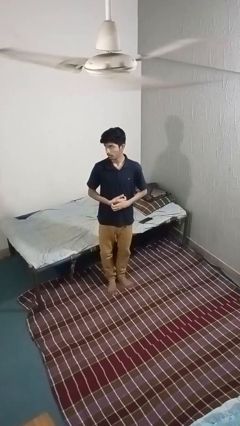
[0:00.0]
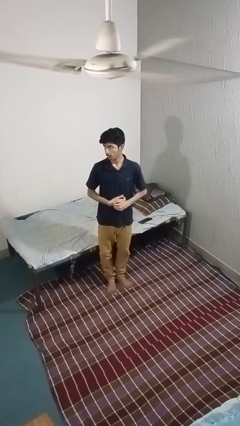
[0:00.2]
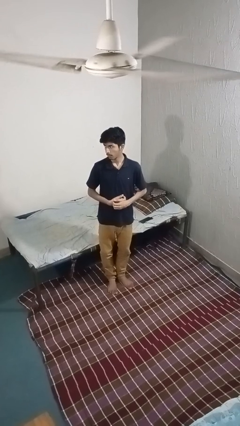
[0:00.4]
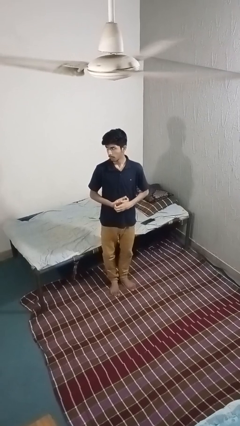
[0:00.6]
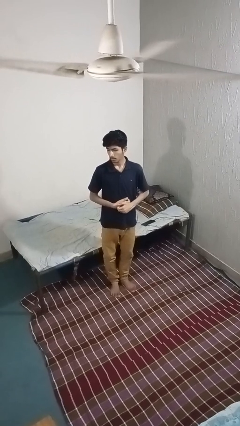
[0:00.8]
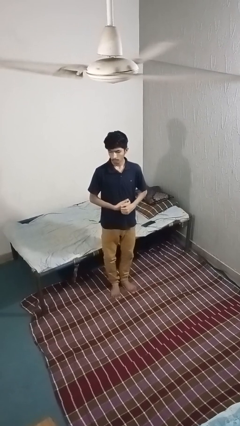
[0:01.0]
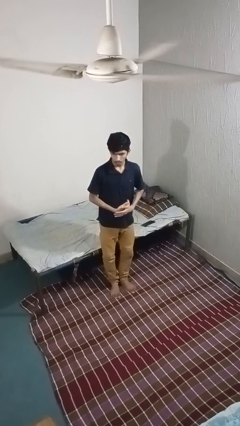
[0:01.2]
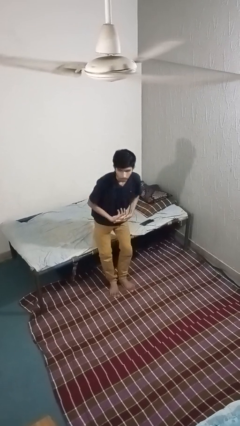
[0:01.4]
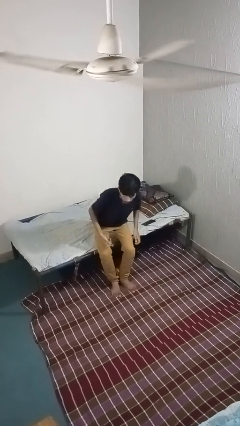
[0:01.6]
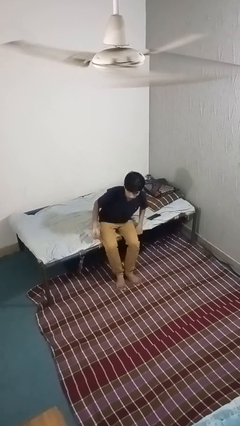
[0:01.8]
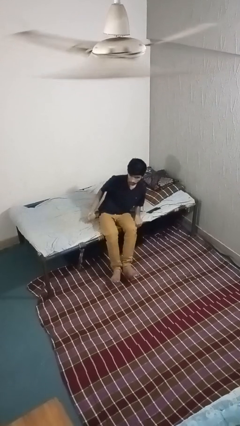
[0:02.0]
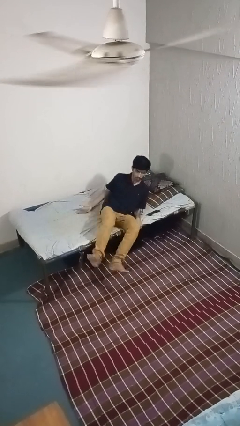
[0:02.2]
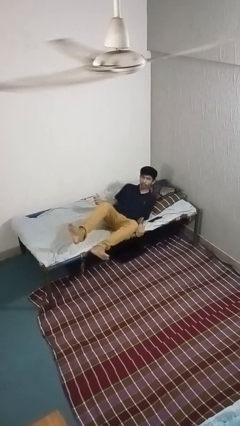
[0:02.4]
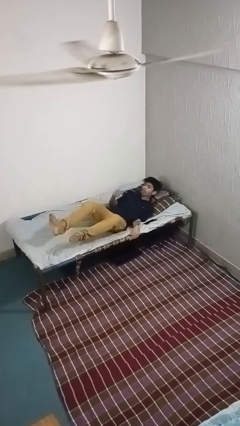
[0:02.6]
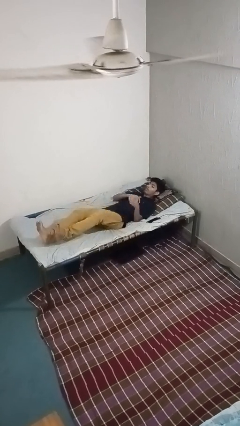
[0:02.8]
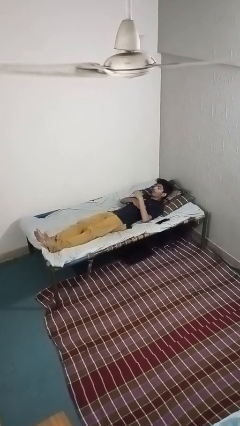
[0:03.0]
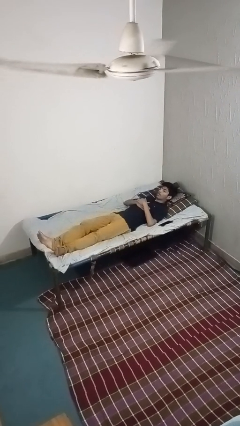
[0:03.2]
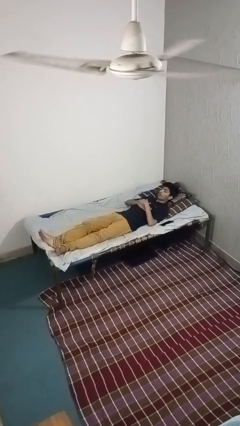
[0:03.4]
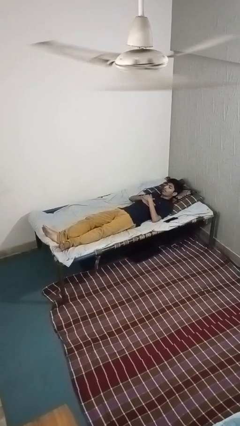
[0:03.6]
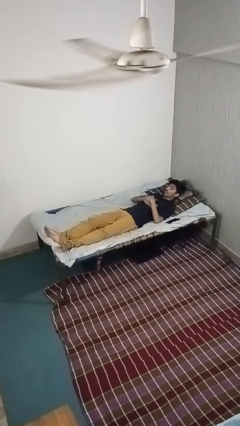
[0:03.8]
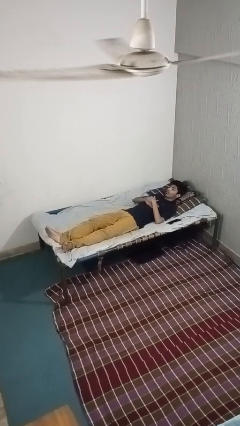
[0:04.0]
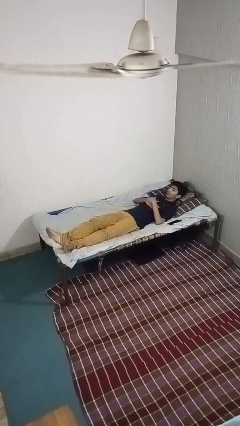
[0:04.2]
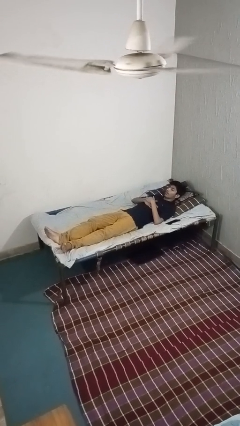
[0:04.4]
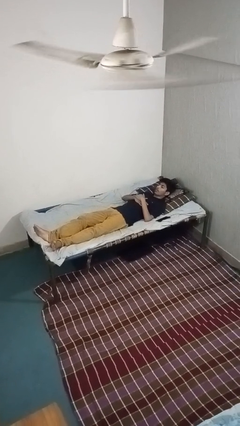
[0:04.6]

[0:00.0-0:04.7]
person lies down on bed

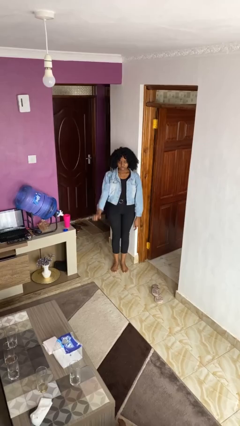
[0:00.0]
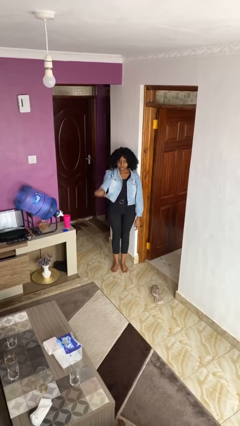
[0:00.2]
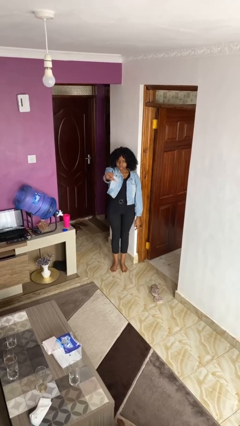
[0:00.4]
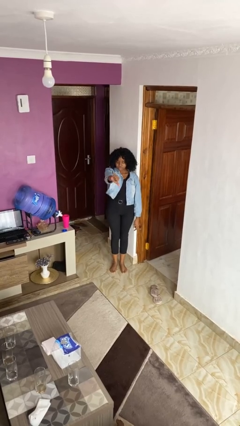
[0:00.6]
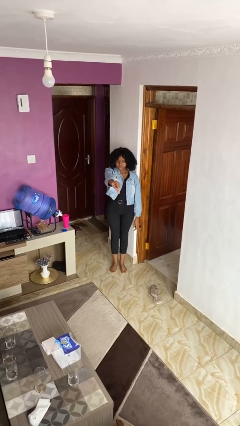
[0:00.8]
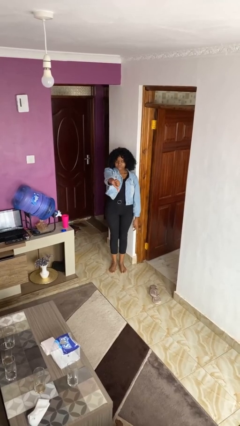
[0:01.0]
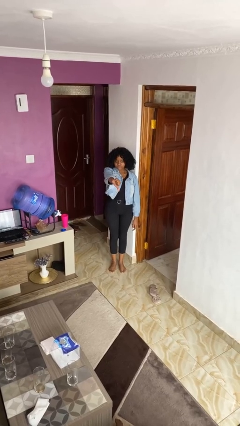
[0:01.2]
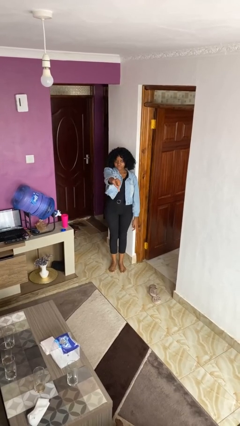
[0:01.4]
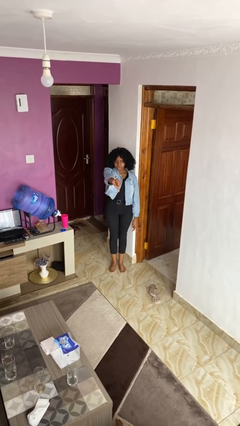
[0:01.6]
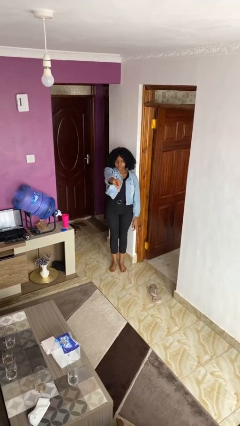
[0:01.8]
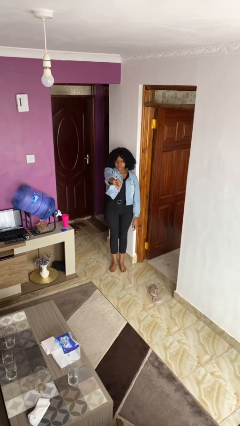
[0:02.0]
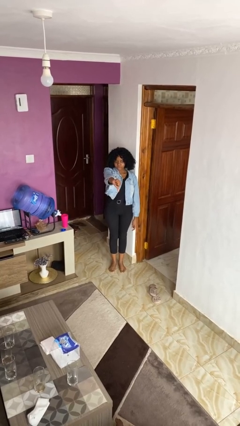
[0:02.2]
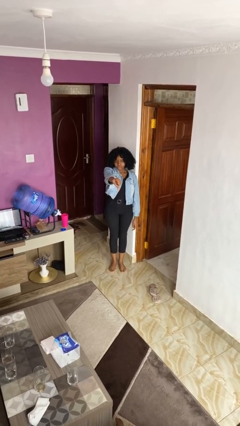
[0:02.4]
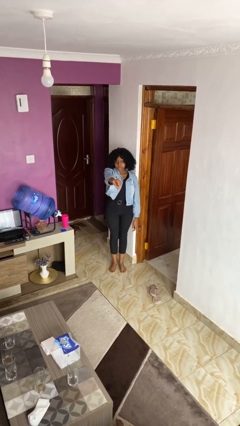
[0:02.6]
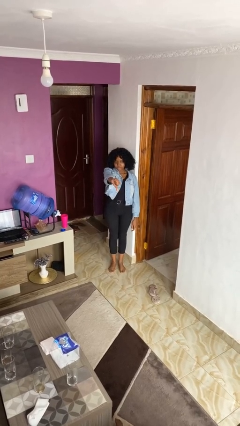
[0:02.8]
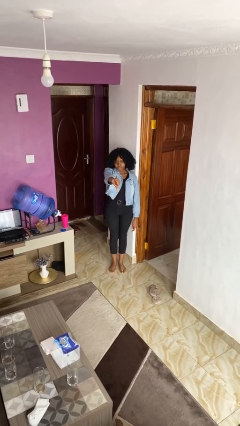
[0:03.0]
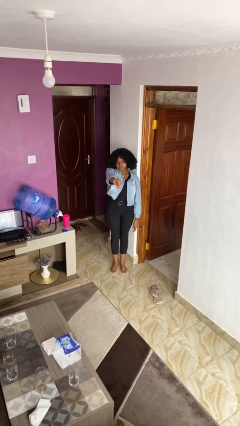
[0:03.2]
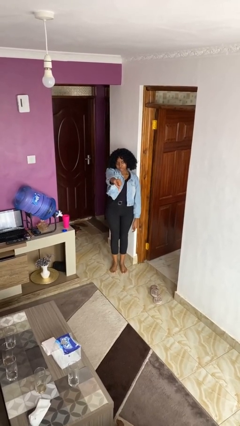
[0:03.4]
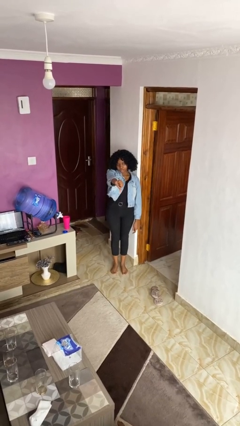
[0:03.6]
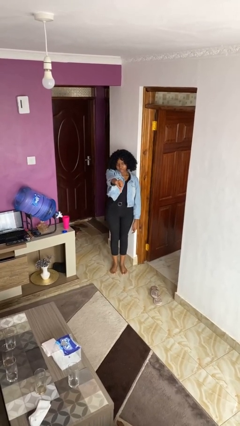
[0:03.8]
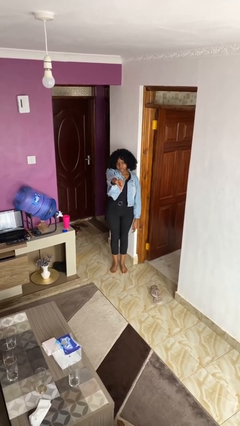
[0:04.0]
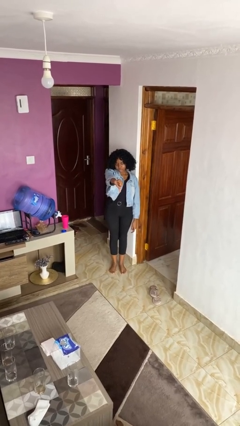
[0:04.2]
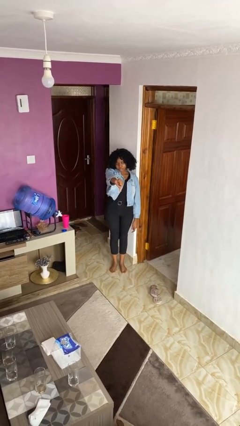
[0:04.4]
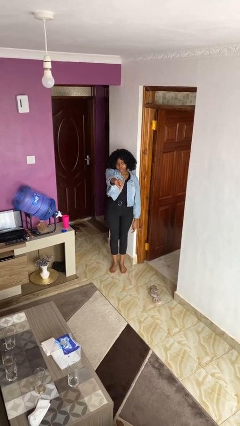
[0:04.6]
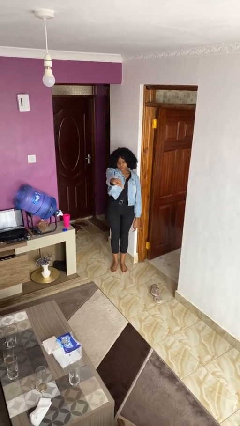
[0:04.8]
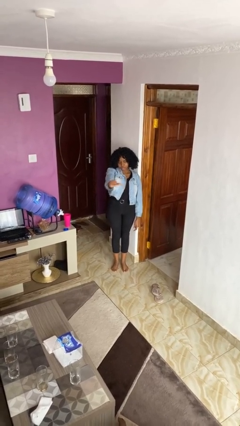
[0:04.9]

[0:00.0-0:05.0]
person gestures thumbs down

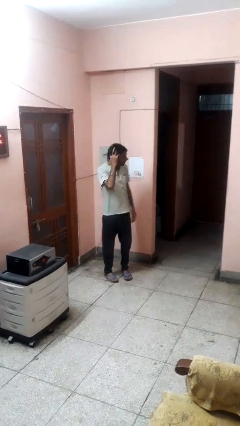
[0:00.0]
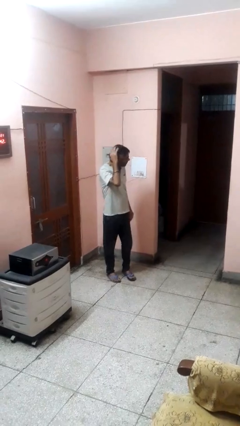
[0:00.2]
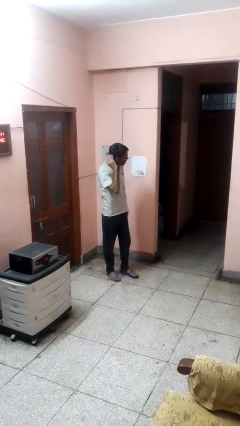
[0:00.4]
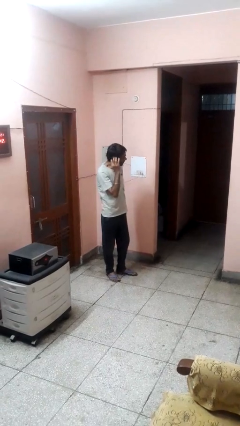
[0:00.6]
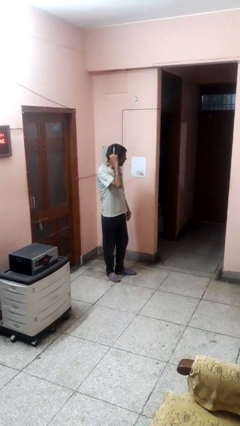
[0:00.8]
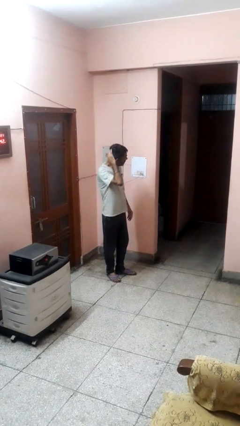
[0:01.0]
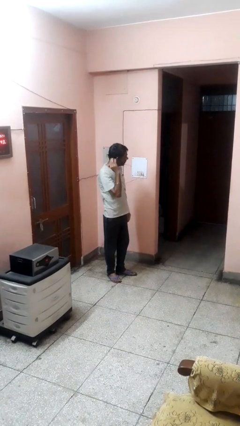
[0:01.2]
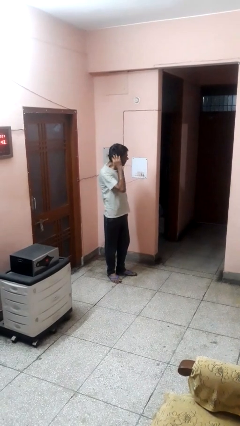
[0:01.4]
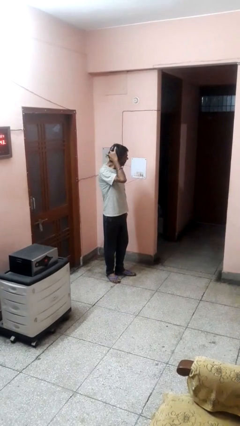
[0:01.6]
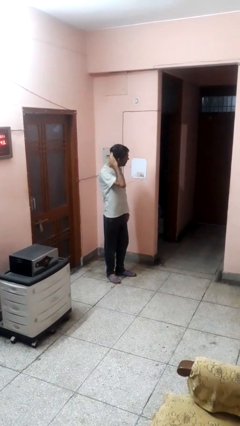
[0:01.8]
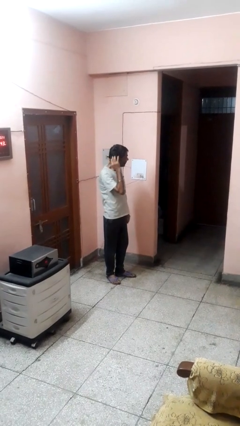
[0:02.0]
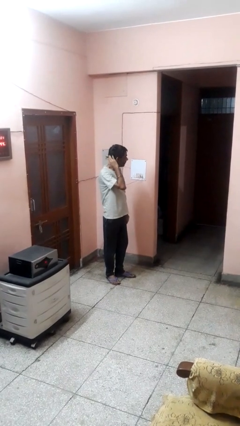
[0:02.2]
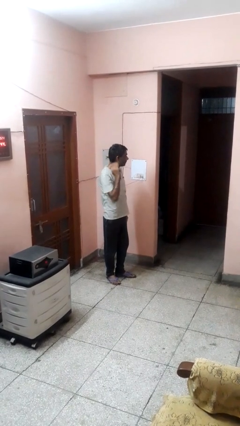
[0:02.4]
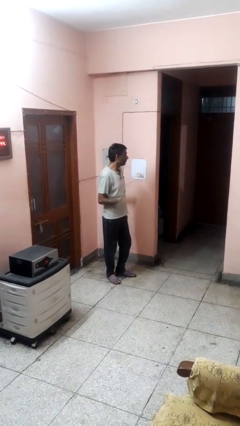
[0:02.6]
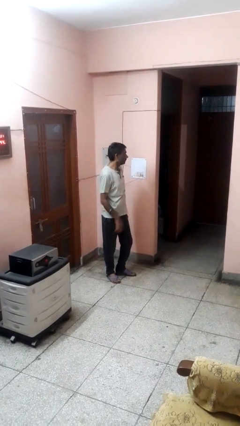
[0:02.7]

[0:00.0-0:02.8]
person strokes hair

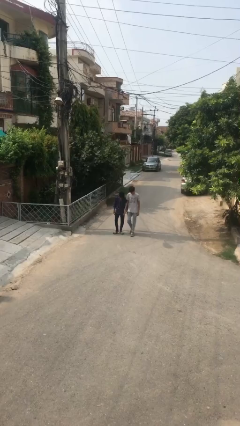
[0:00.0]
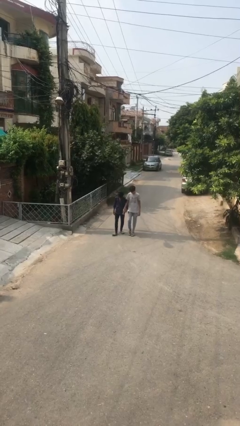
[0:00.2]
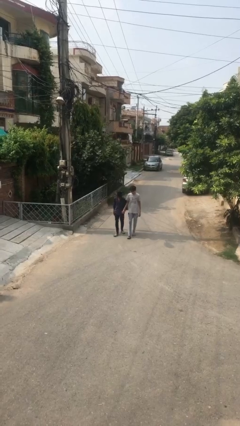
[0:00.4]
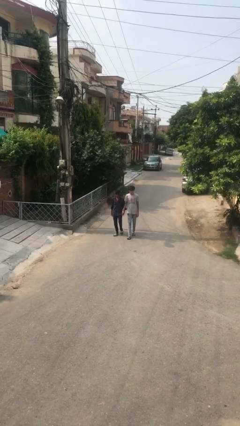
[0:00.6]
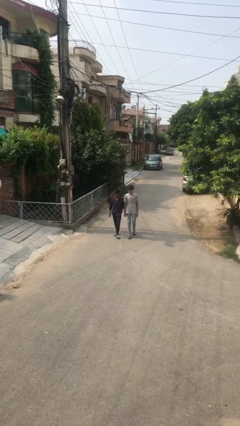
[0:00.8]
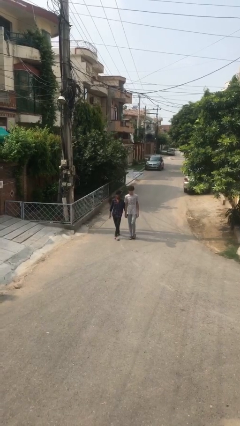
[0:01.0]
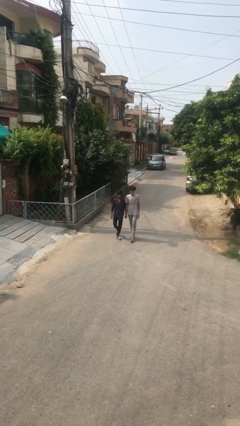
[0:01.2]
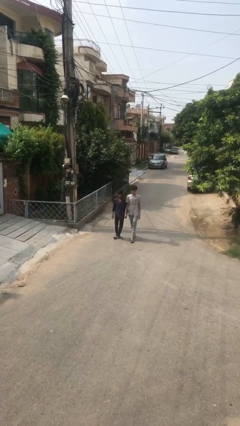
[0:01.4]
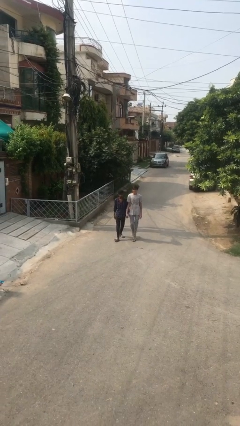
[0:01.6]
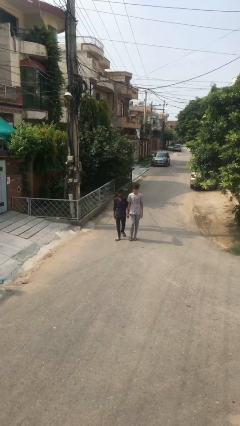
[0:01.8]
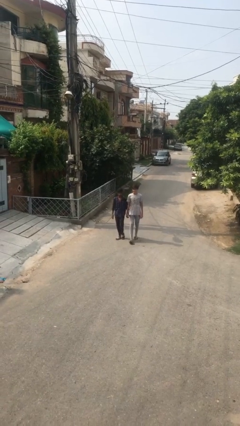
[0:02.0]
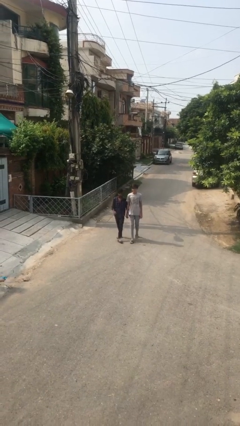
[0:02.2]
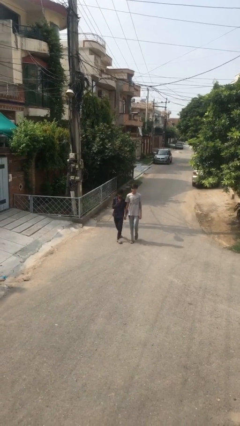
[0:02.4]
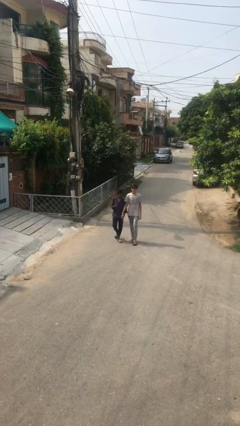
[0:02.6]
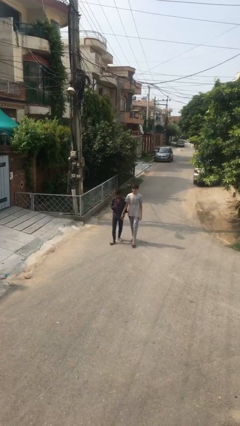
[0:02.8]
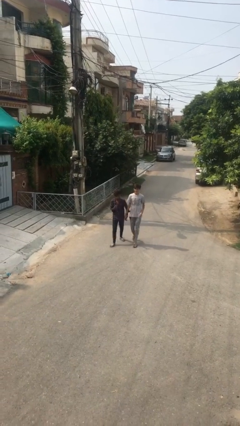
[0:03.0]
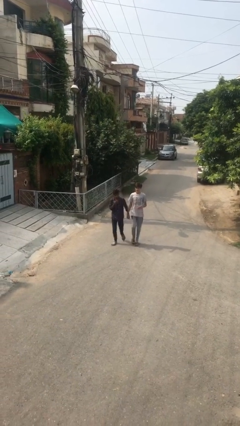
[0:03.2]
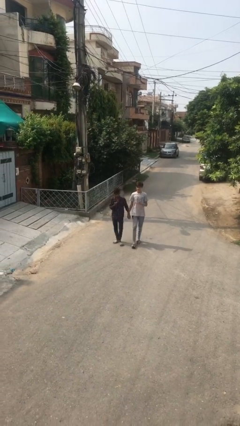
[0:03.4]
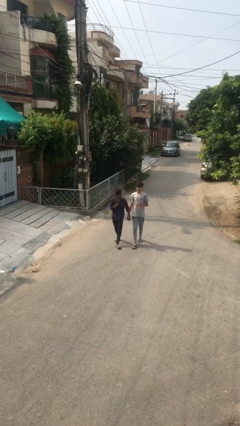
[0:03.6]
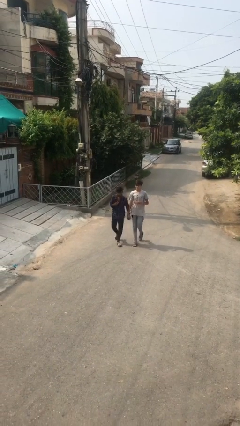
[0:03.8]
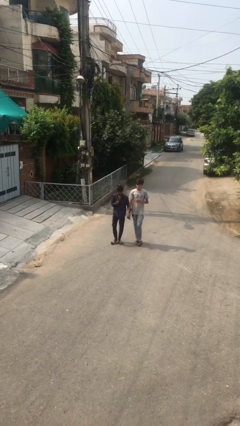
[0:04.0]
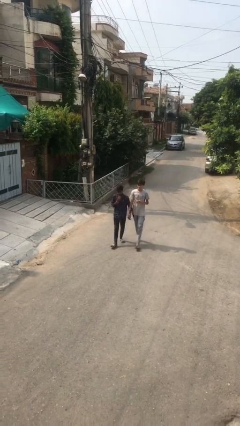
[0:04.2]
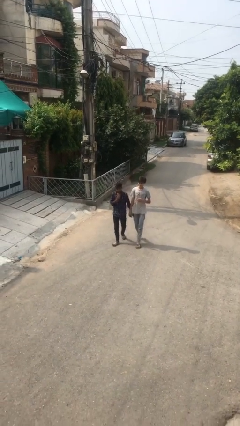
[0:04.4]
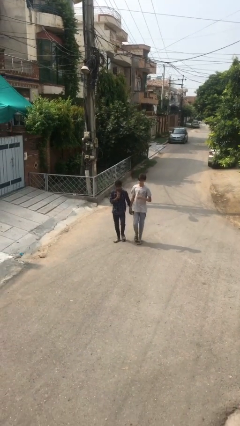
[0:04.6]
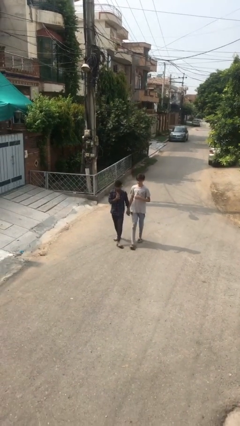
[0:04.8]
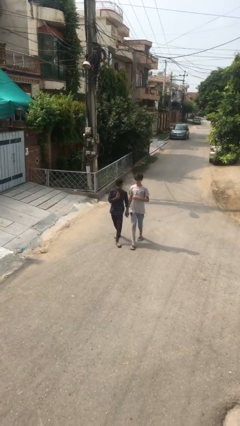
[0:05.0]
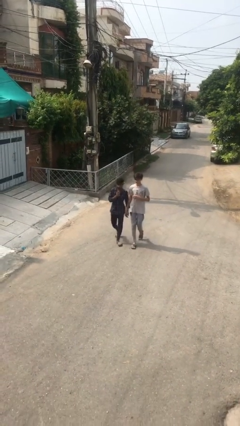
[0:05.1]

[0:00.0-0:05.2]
person holds hand
